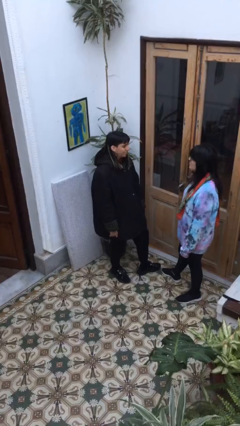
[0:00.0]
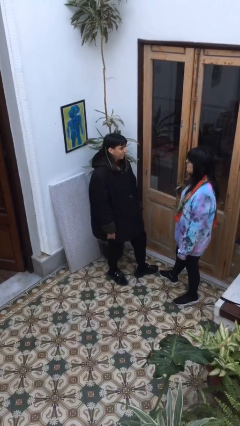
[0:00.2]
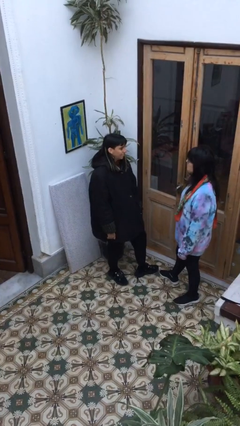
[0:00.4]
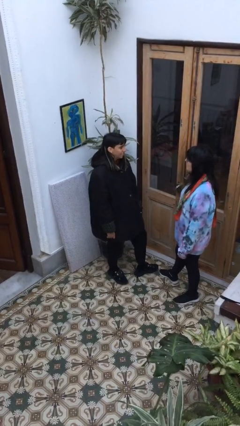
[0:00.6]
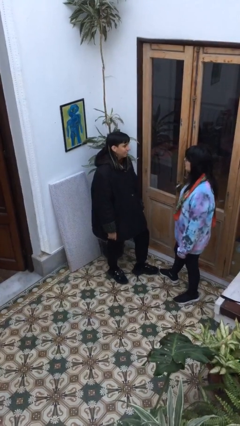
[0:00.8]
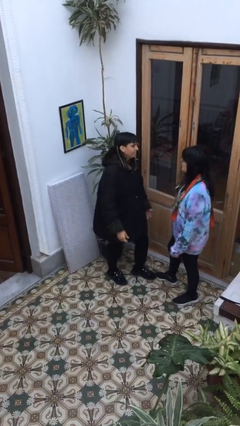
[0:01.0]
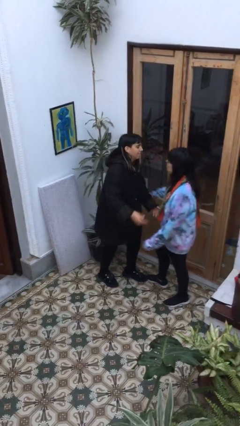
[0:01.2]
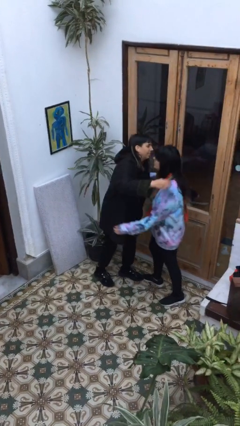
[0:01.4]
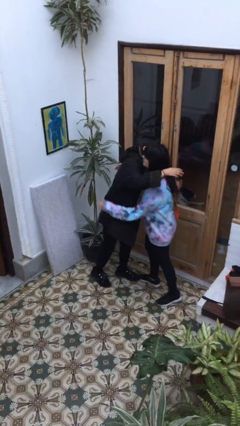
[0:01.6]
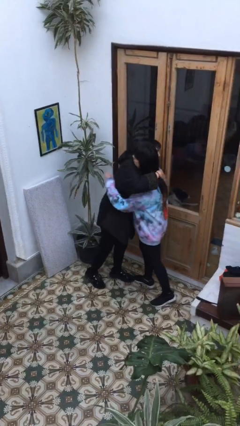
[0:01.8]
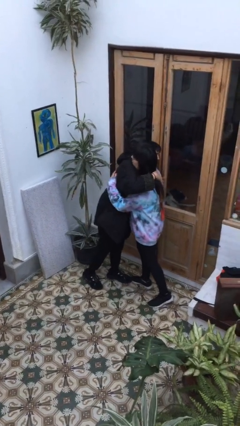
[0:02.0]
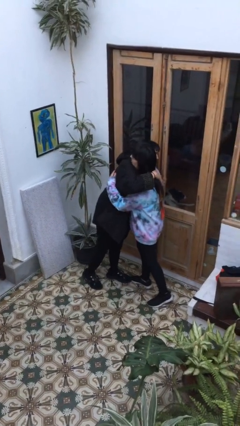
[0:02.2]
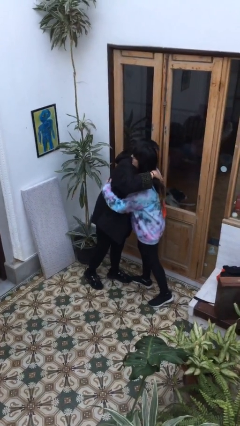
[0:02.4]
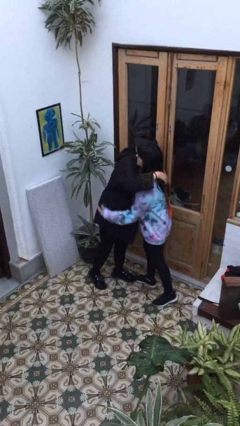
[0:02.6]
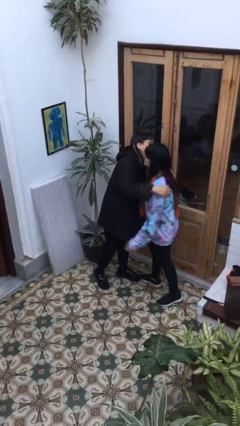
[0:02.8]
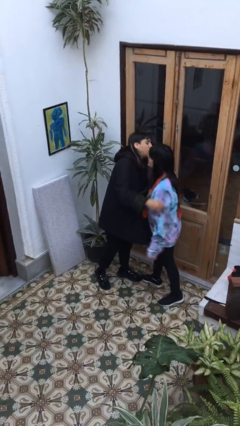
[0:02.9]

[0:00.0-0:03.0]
person embraces person

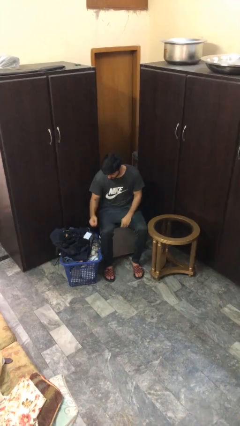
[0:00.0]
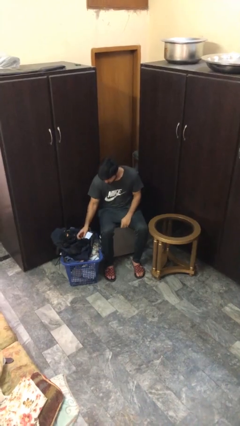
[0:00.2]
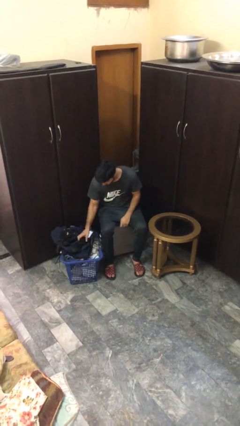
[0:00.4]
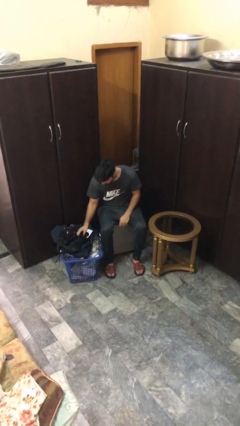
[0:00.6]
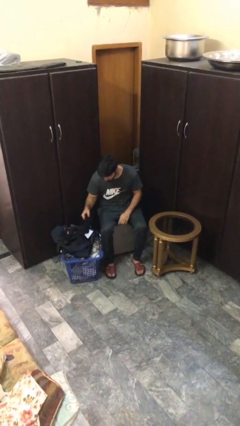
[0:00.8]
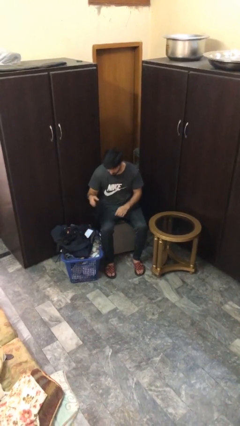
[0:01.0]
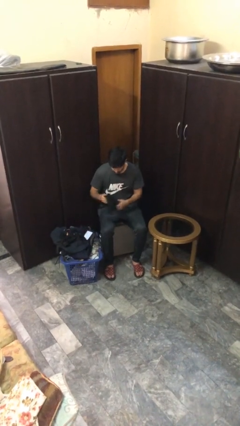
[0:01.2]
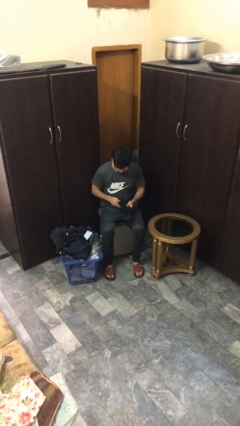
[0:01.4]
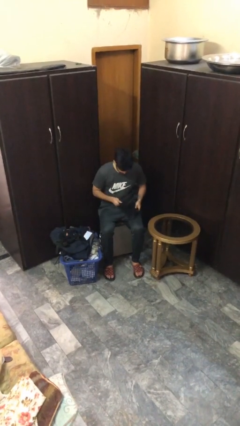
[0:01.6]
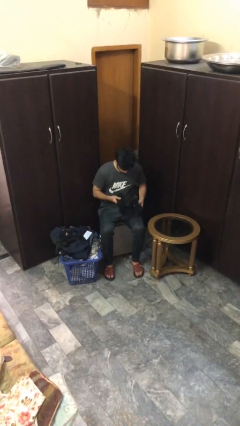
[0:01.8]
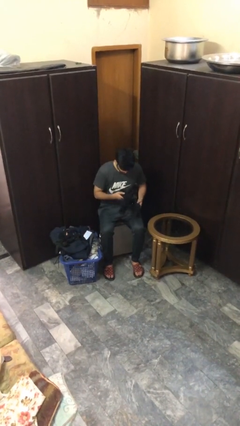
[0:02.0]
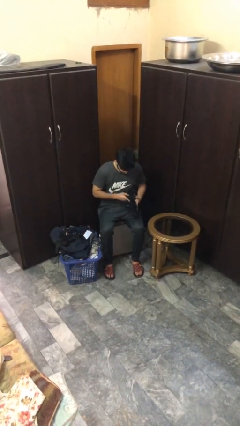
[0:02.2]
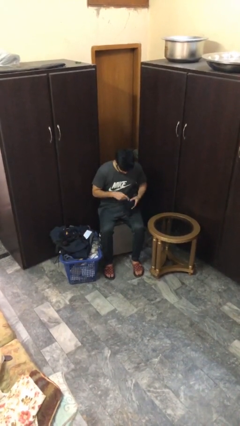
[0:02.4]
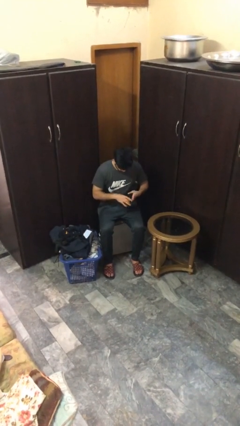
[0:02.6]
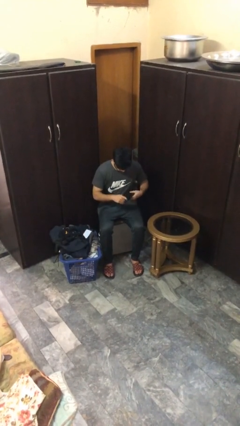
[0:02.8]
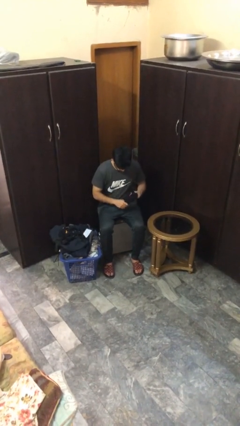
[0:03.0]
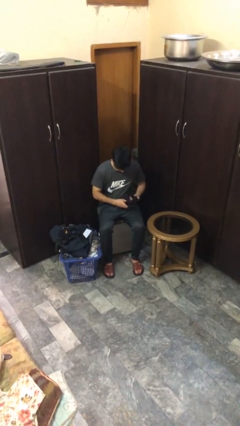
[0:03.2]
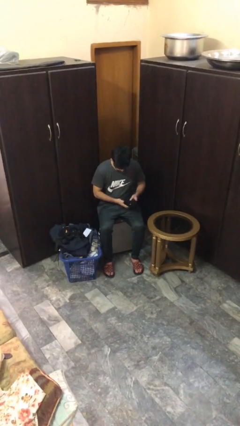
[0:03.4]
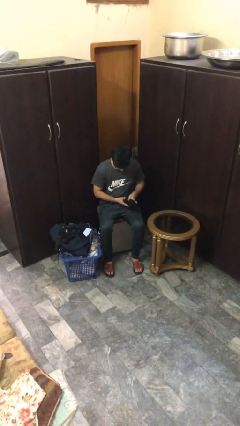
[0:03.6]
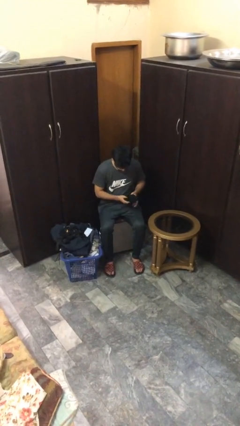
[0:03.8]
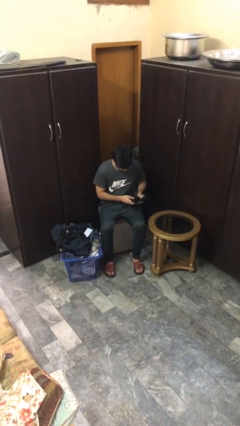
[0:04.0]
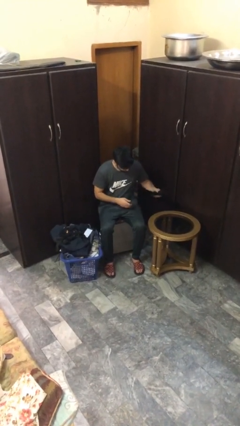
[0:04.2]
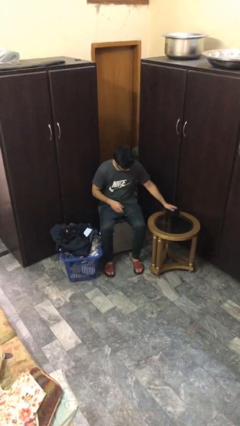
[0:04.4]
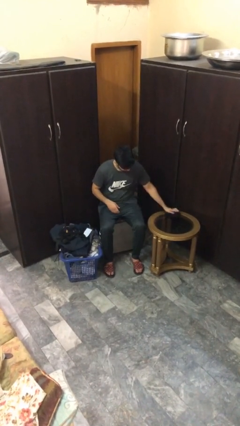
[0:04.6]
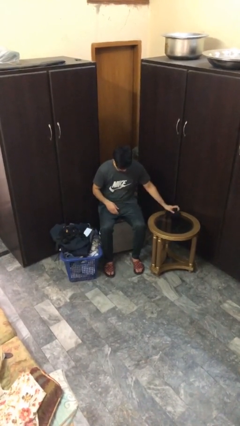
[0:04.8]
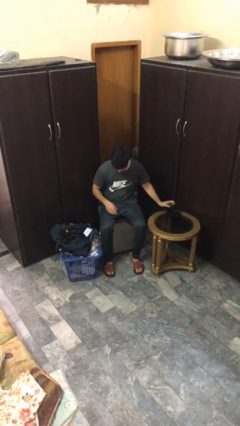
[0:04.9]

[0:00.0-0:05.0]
person folds socks

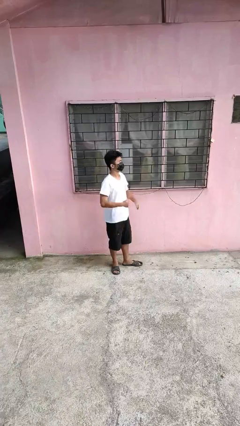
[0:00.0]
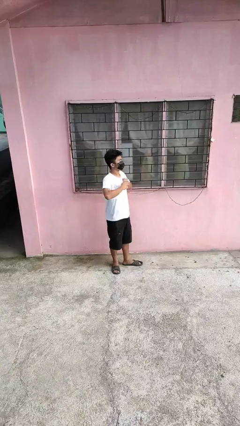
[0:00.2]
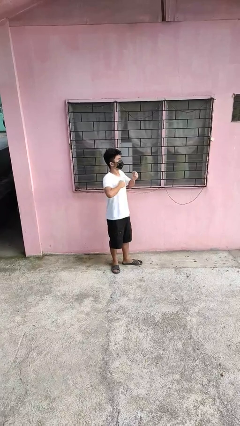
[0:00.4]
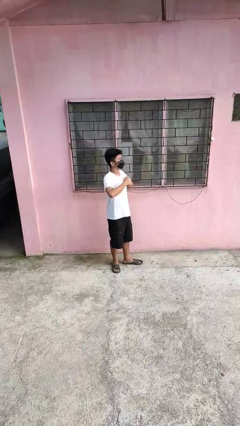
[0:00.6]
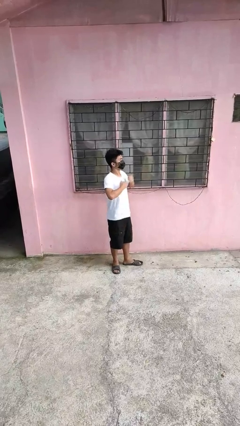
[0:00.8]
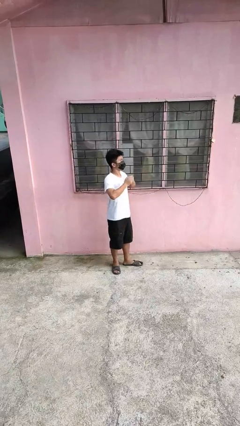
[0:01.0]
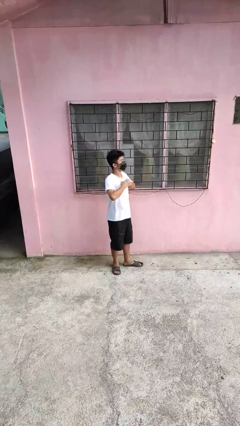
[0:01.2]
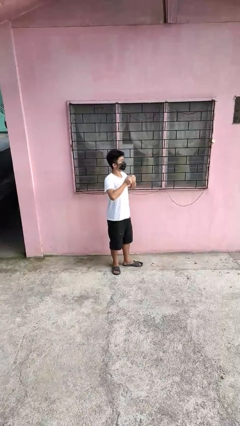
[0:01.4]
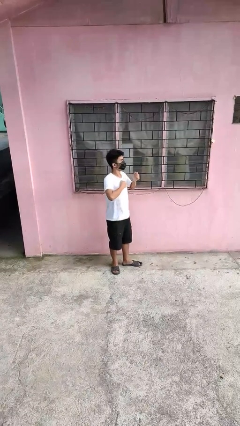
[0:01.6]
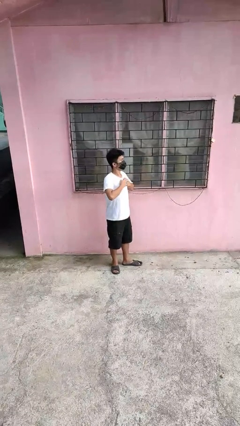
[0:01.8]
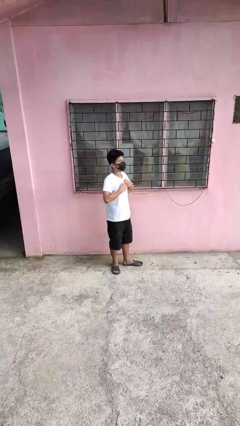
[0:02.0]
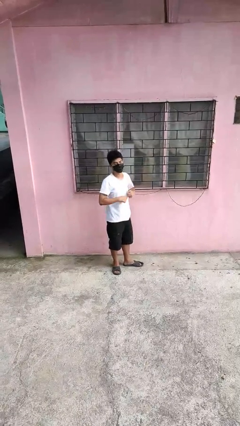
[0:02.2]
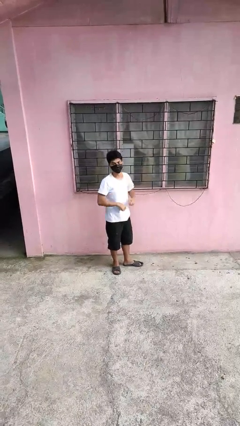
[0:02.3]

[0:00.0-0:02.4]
person drums on chest

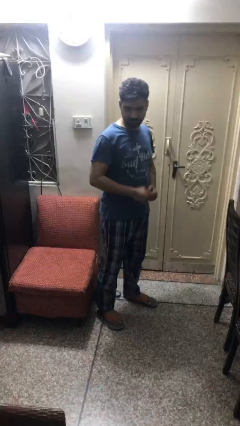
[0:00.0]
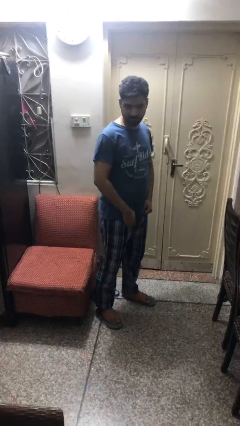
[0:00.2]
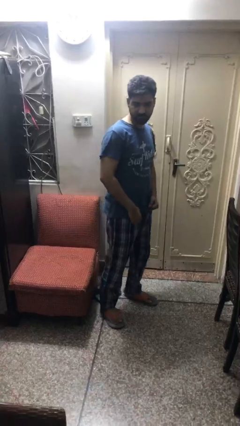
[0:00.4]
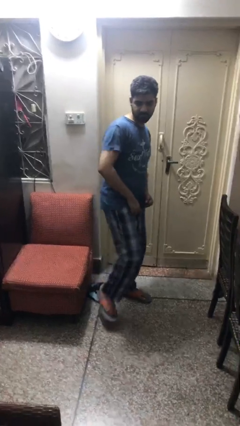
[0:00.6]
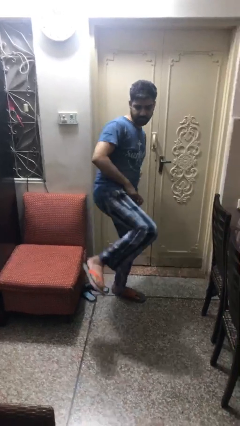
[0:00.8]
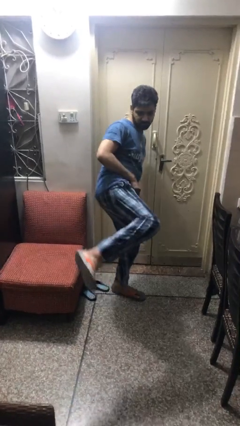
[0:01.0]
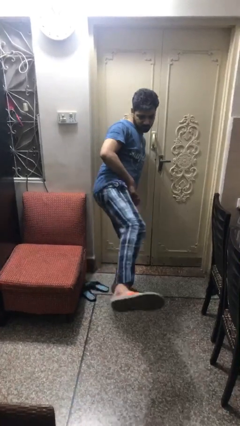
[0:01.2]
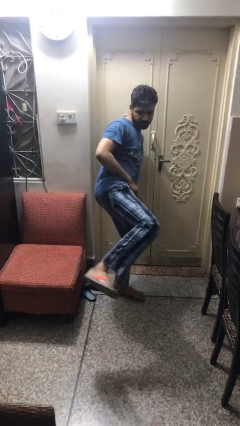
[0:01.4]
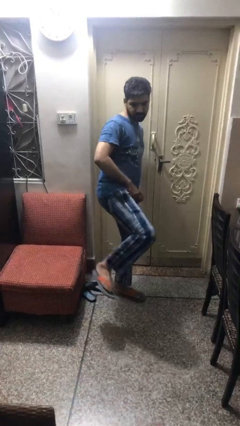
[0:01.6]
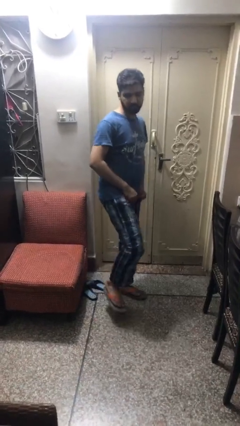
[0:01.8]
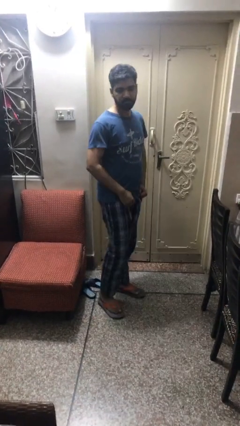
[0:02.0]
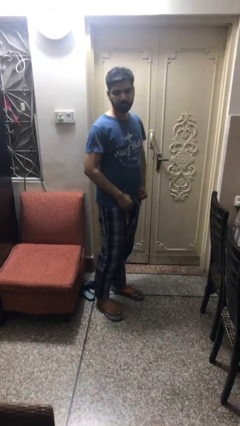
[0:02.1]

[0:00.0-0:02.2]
person karate kicks

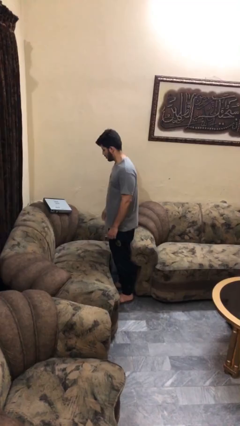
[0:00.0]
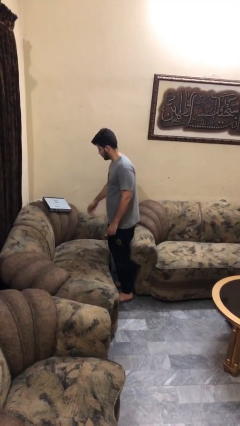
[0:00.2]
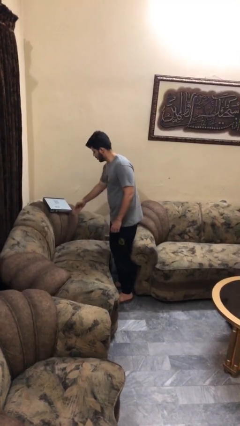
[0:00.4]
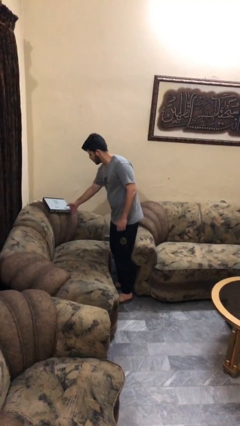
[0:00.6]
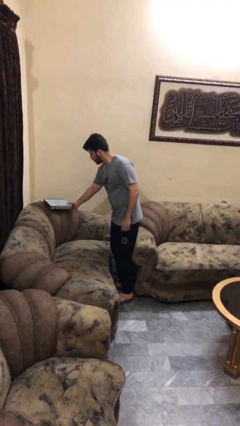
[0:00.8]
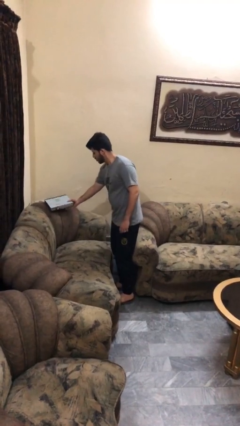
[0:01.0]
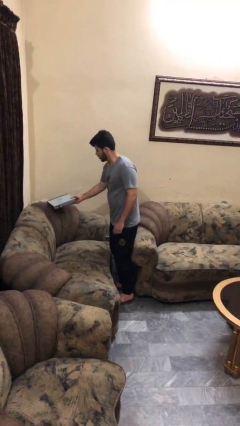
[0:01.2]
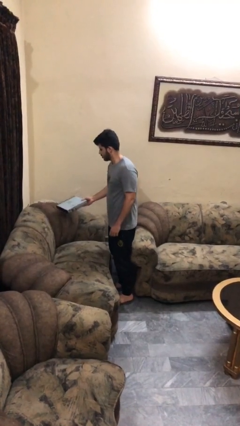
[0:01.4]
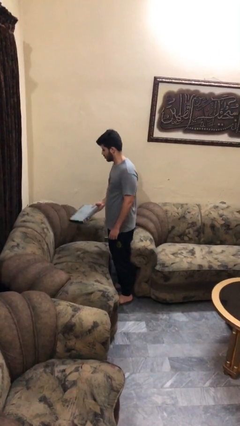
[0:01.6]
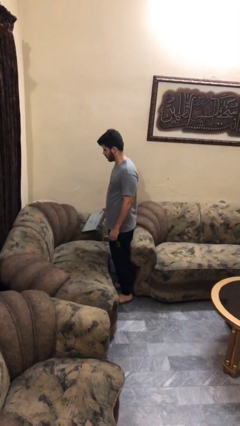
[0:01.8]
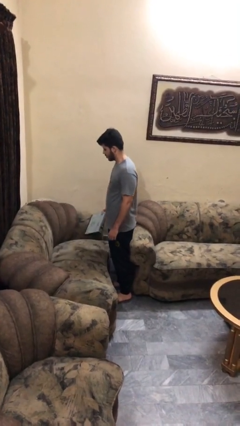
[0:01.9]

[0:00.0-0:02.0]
person picks up object from couch

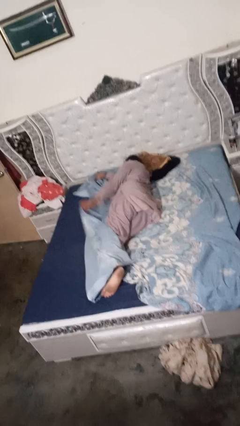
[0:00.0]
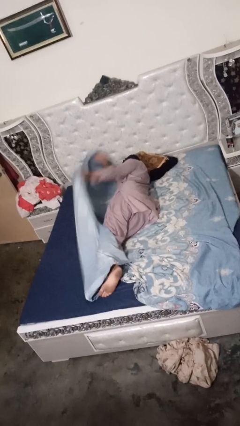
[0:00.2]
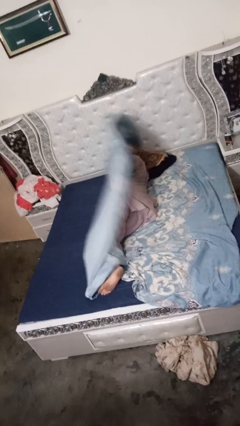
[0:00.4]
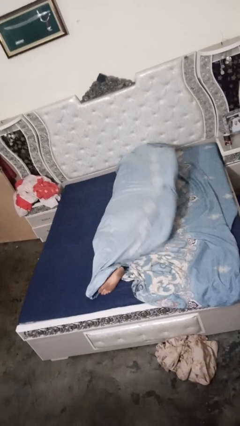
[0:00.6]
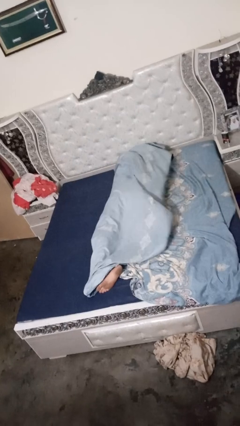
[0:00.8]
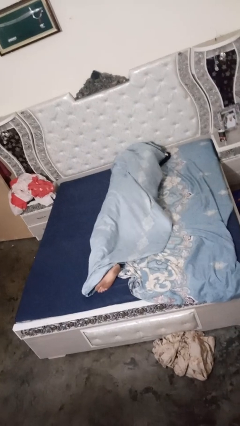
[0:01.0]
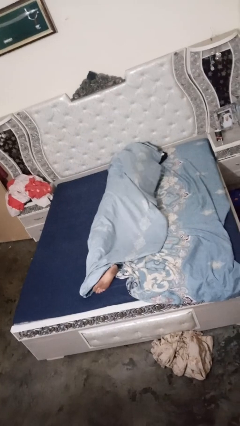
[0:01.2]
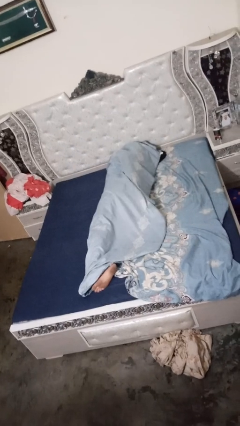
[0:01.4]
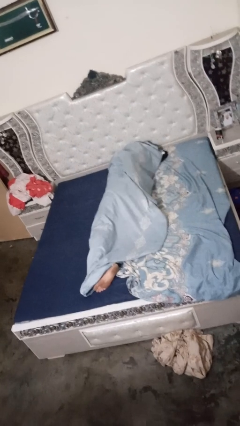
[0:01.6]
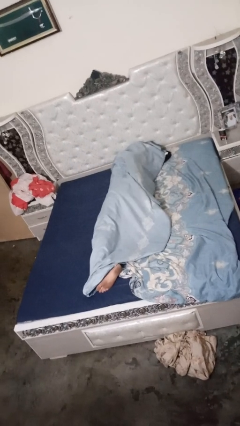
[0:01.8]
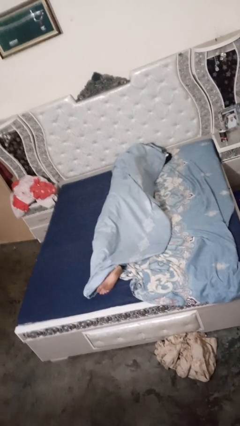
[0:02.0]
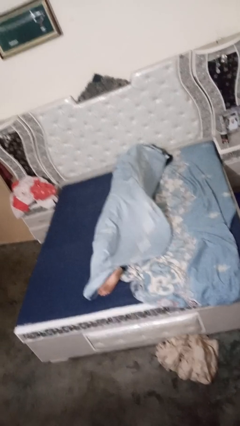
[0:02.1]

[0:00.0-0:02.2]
person covers with bedsheets

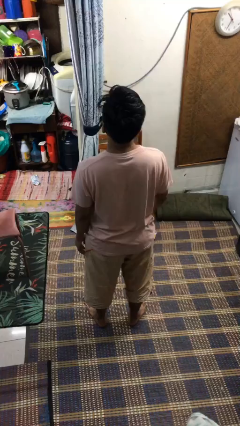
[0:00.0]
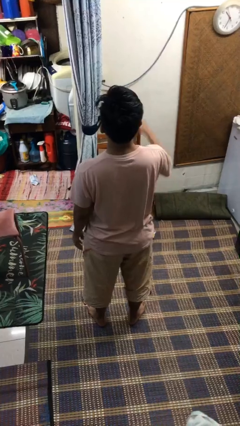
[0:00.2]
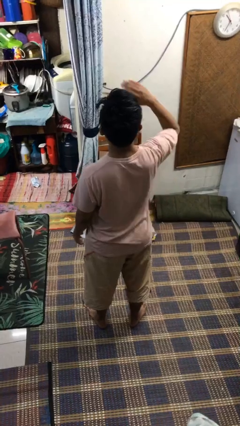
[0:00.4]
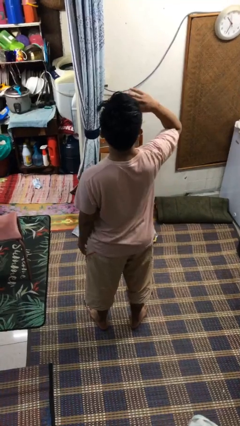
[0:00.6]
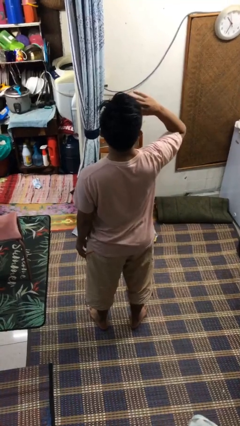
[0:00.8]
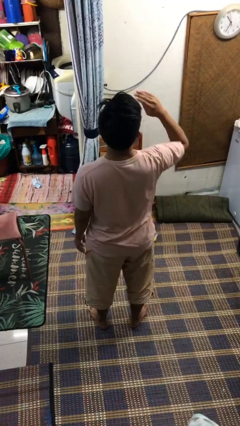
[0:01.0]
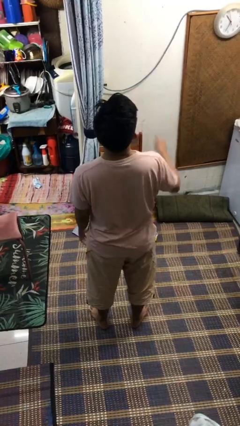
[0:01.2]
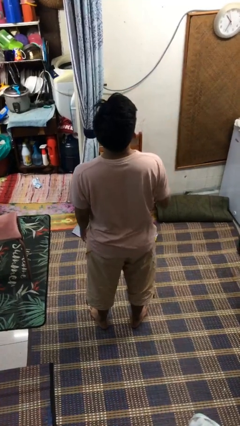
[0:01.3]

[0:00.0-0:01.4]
person salutes
